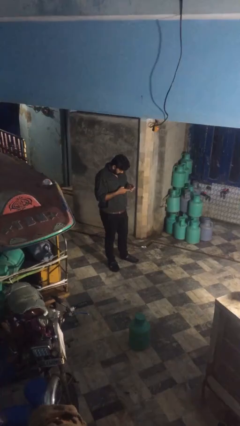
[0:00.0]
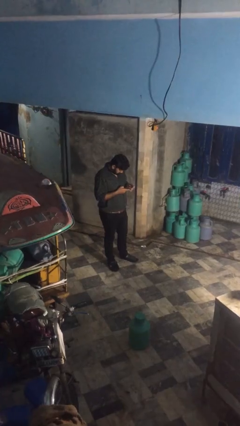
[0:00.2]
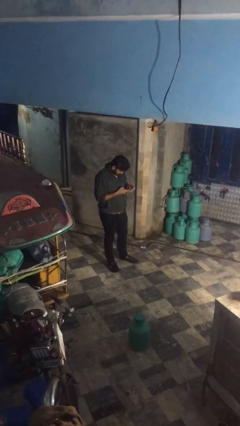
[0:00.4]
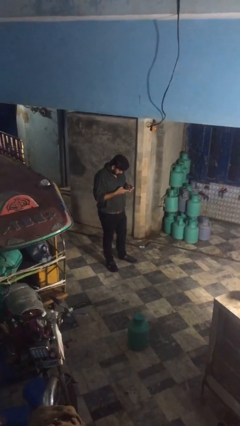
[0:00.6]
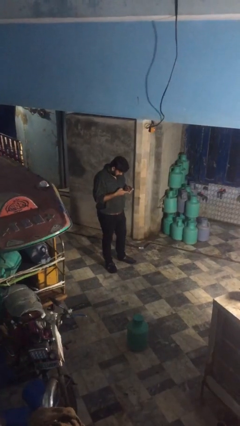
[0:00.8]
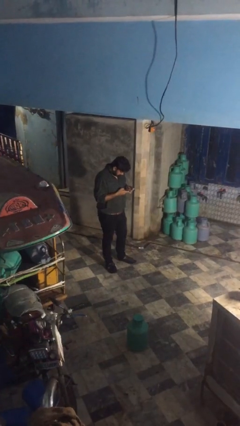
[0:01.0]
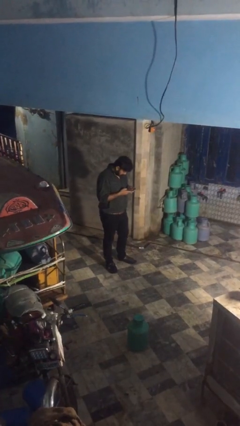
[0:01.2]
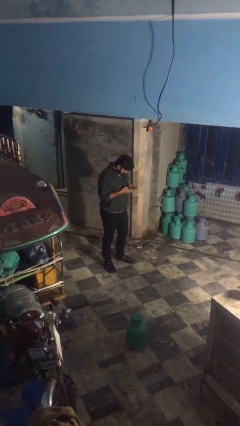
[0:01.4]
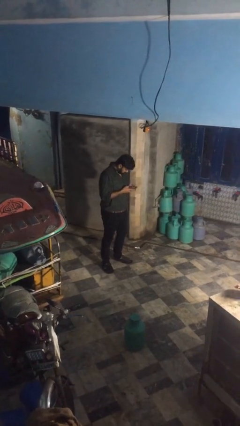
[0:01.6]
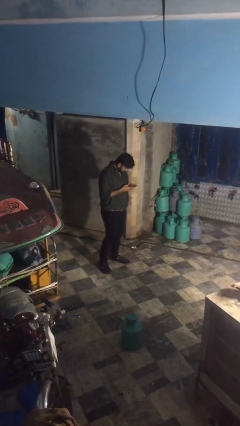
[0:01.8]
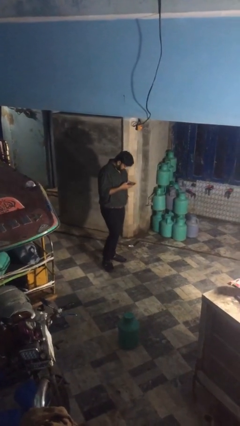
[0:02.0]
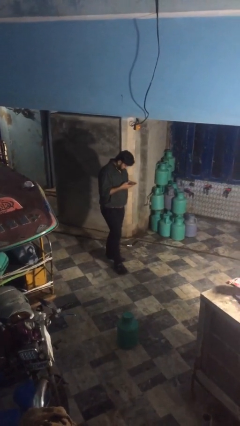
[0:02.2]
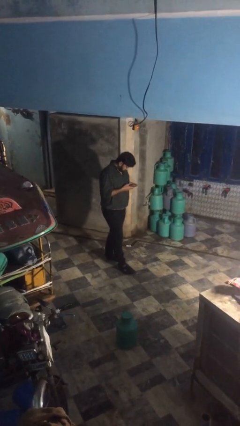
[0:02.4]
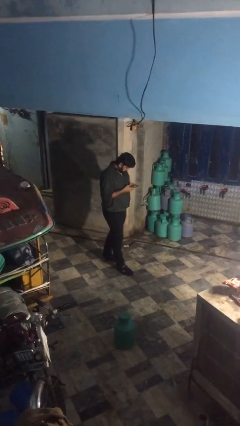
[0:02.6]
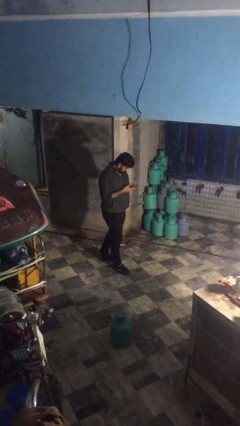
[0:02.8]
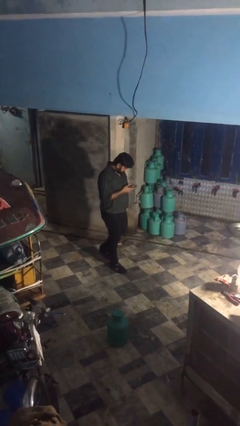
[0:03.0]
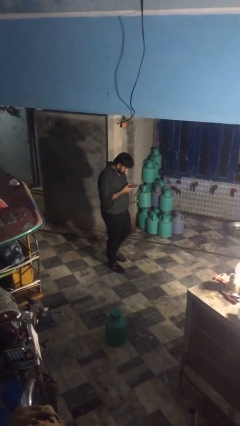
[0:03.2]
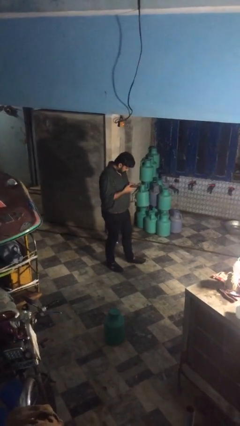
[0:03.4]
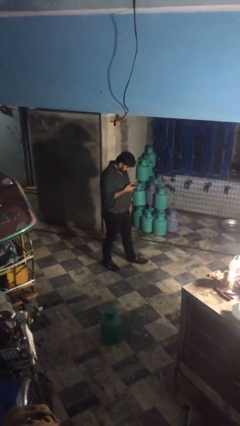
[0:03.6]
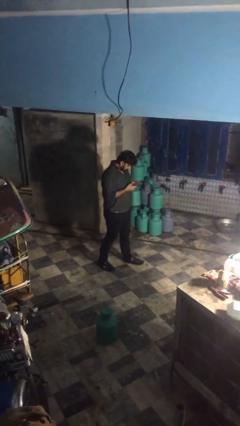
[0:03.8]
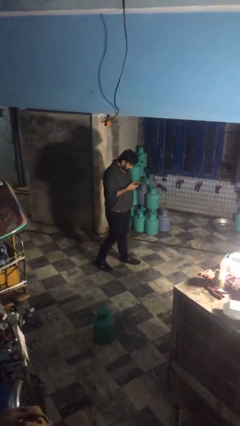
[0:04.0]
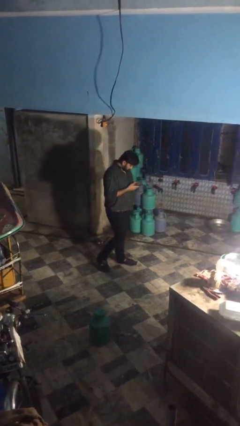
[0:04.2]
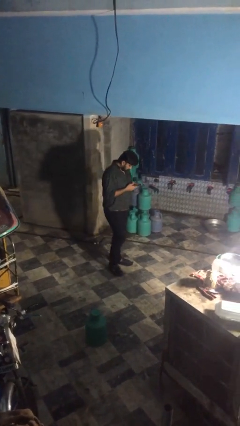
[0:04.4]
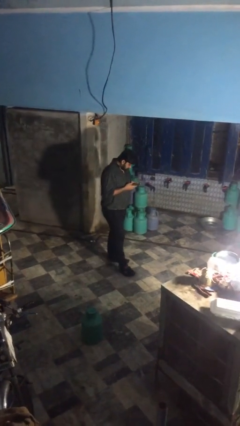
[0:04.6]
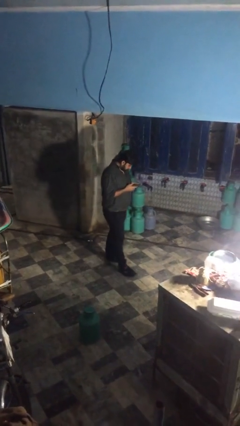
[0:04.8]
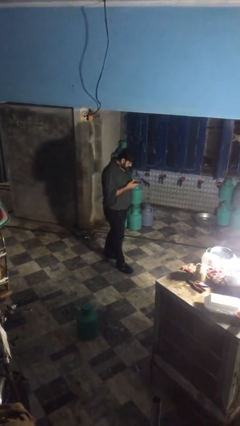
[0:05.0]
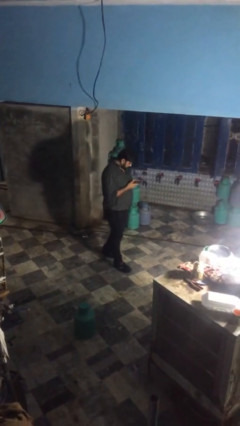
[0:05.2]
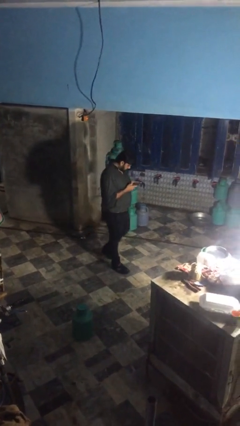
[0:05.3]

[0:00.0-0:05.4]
person texts on phone

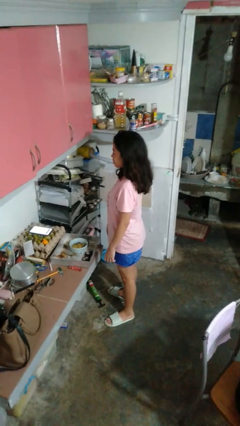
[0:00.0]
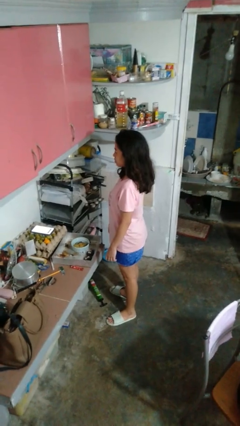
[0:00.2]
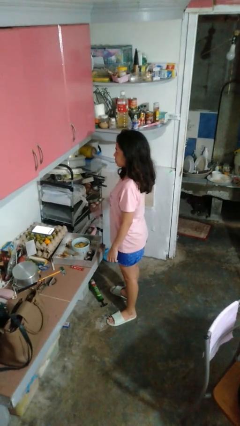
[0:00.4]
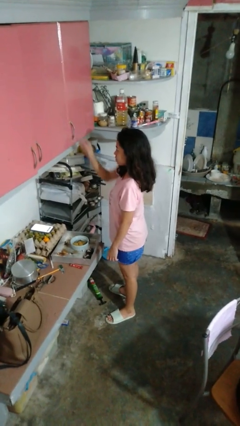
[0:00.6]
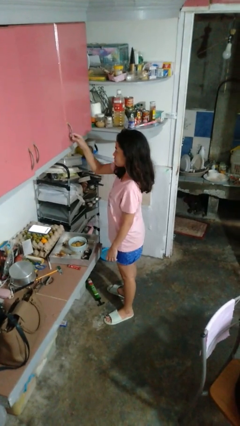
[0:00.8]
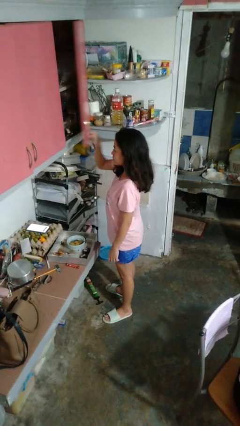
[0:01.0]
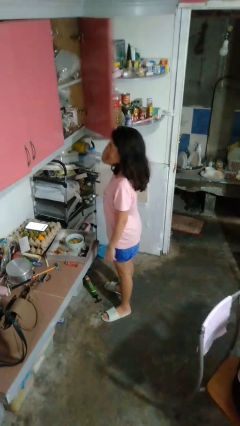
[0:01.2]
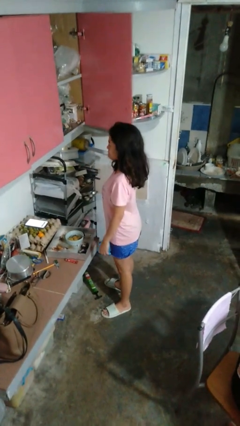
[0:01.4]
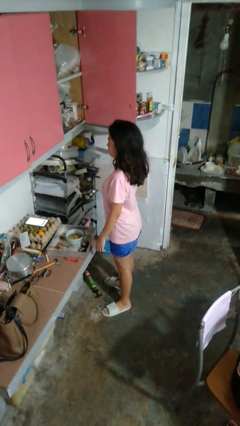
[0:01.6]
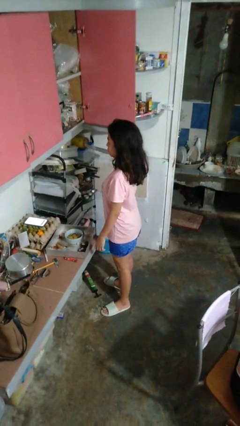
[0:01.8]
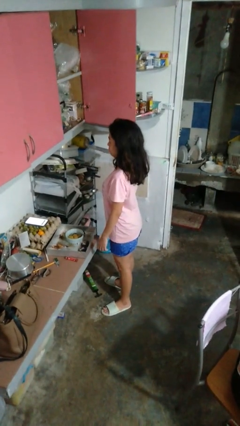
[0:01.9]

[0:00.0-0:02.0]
person opens cabinet

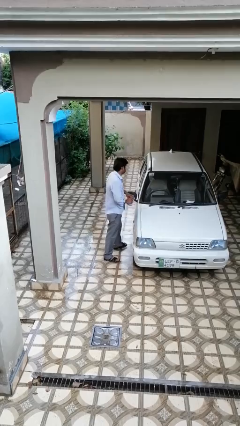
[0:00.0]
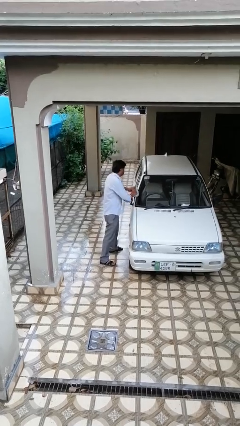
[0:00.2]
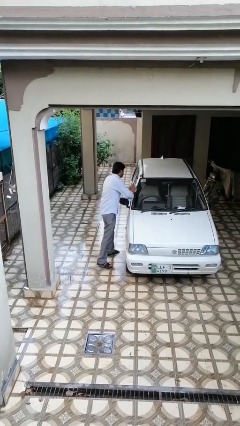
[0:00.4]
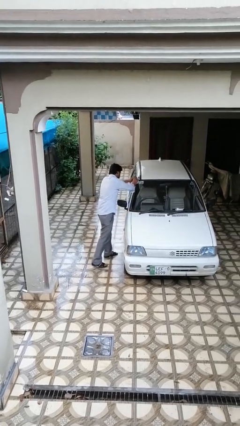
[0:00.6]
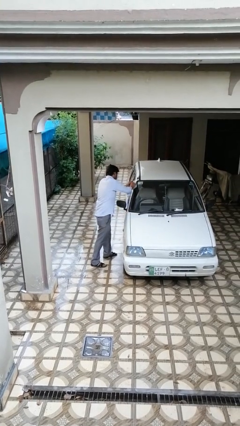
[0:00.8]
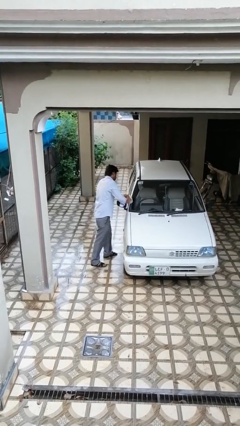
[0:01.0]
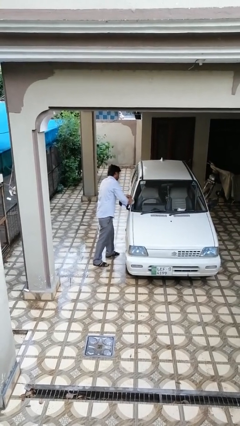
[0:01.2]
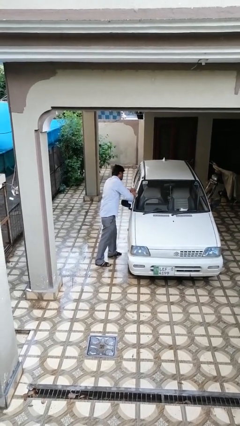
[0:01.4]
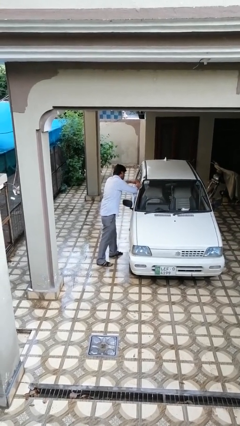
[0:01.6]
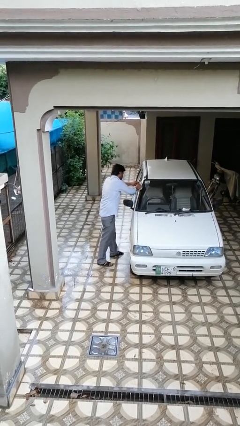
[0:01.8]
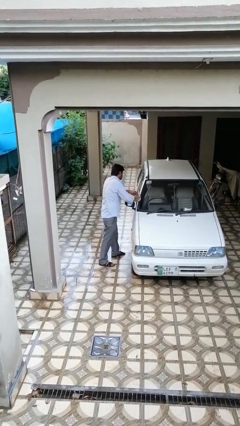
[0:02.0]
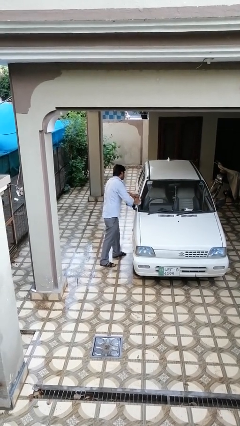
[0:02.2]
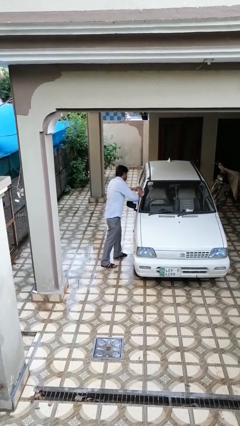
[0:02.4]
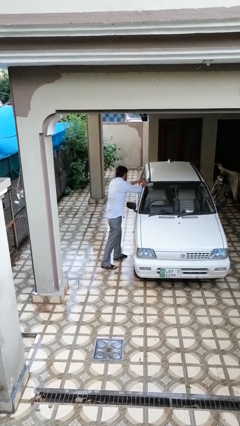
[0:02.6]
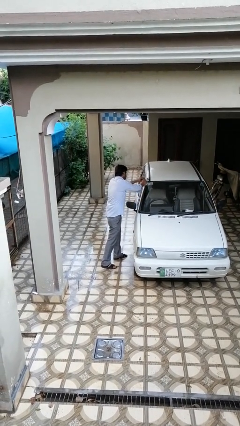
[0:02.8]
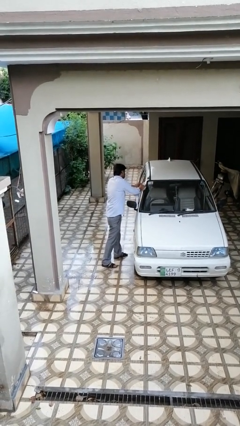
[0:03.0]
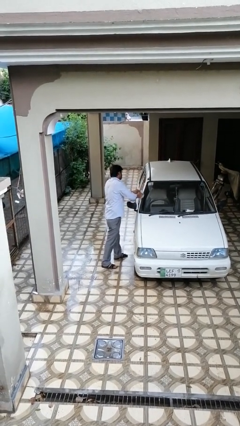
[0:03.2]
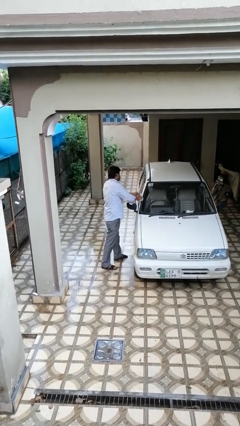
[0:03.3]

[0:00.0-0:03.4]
person polishes car with rag

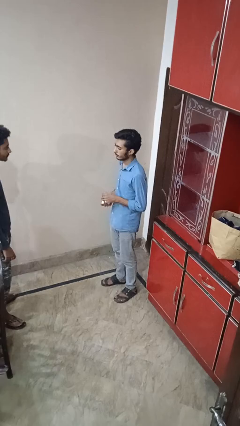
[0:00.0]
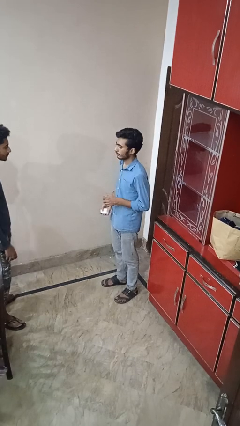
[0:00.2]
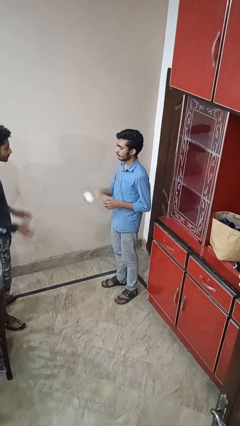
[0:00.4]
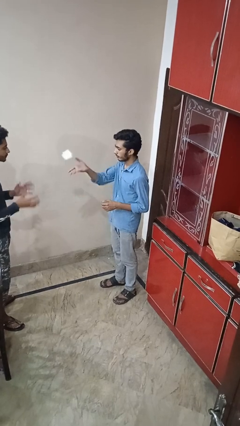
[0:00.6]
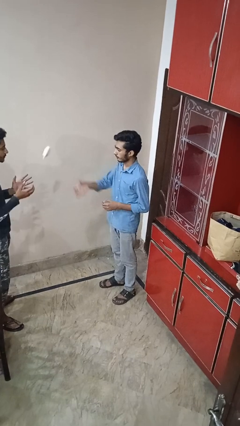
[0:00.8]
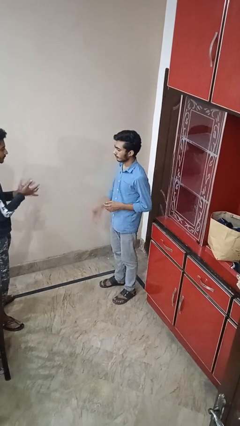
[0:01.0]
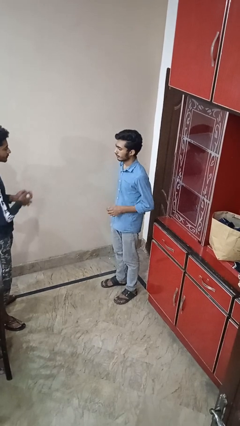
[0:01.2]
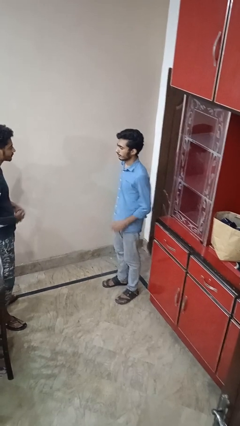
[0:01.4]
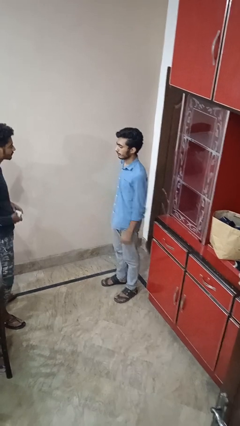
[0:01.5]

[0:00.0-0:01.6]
person throws object to person

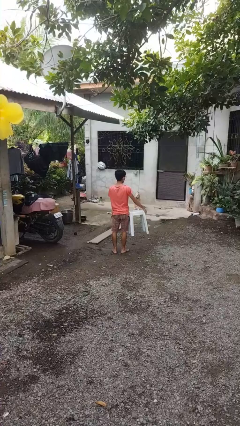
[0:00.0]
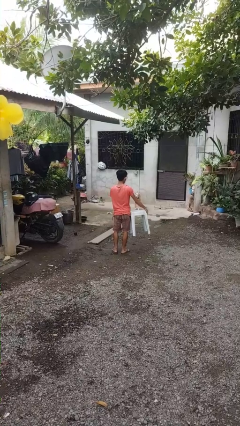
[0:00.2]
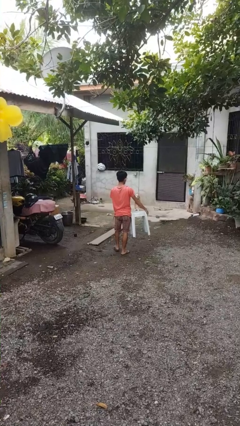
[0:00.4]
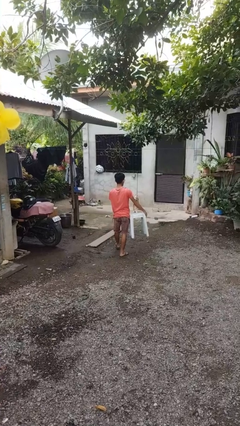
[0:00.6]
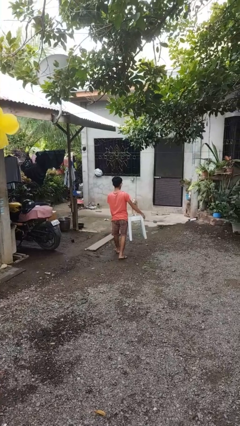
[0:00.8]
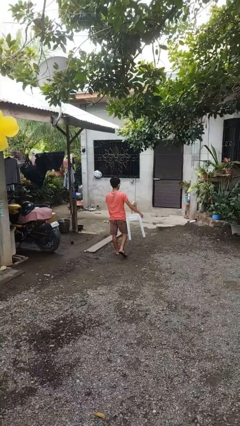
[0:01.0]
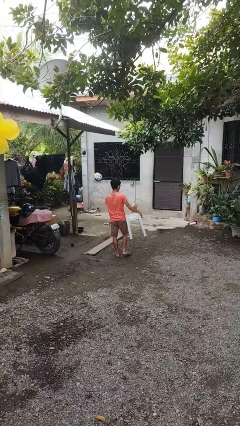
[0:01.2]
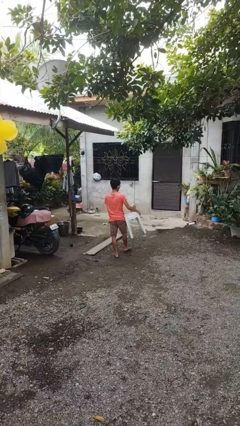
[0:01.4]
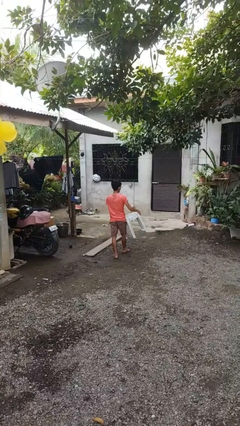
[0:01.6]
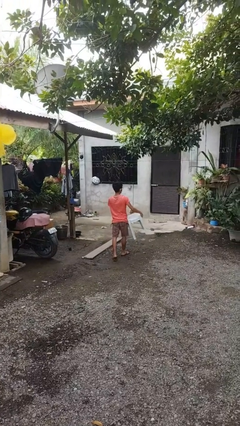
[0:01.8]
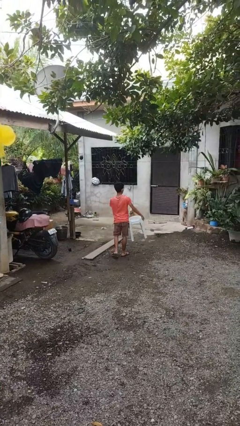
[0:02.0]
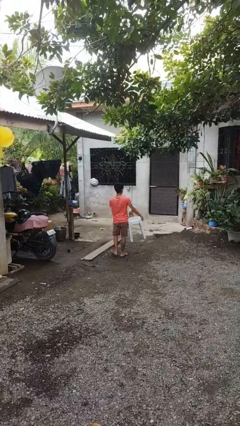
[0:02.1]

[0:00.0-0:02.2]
person carries furniture

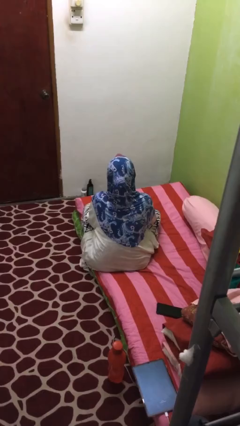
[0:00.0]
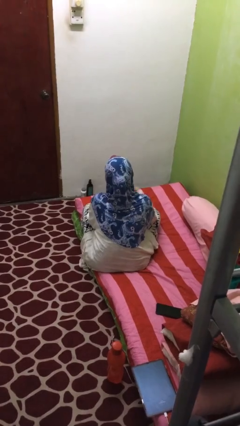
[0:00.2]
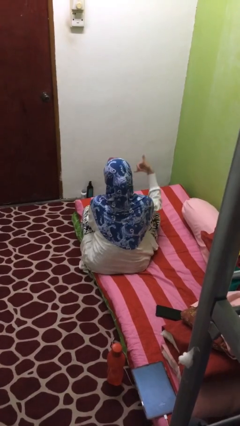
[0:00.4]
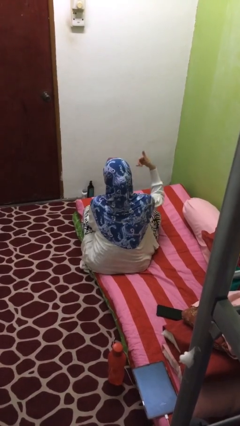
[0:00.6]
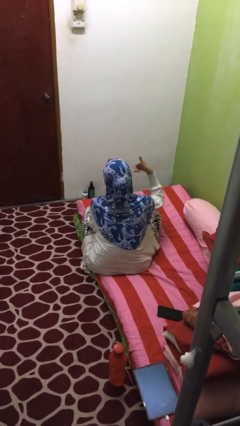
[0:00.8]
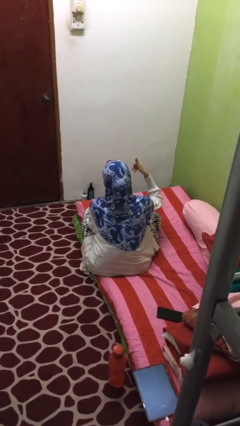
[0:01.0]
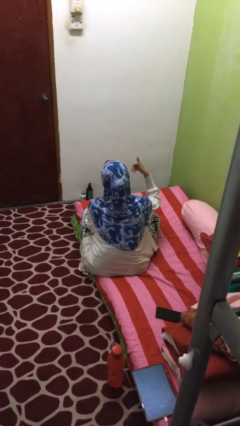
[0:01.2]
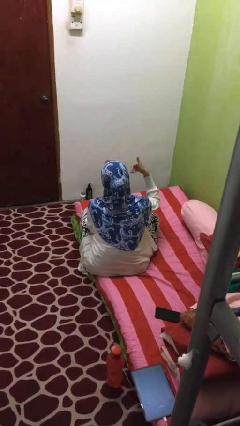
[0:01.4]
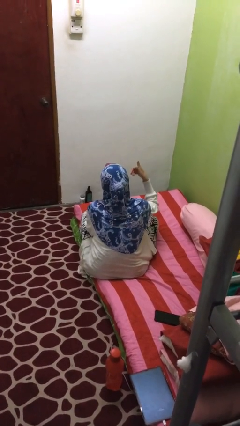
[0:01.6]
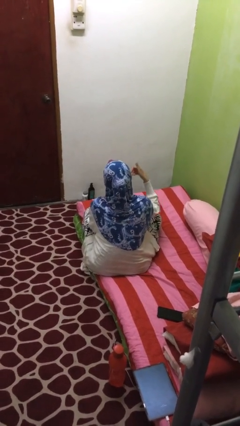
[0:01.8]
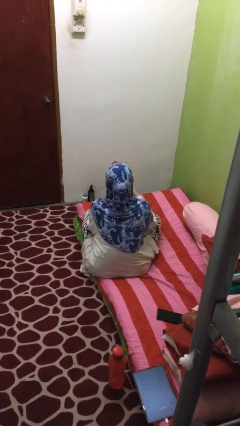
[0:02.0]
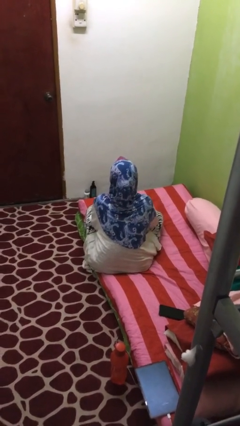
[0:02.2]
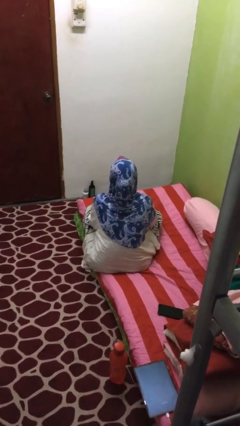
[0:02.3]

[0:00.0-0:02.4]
person gestures hang loose

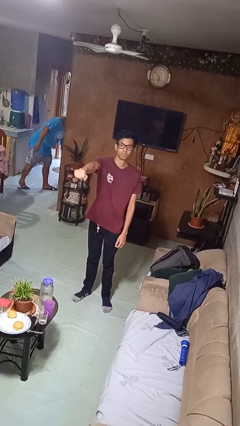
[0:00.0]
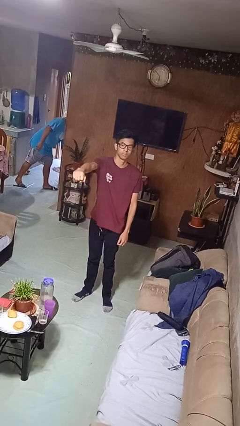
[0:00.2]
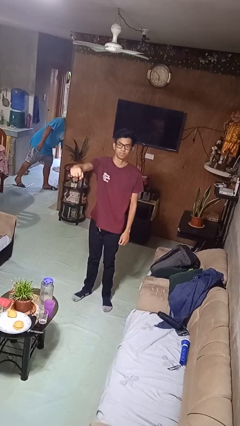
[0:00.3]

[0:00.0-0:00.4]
person punches
